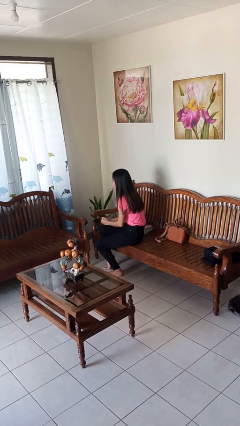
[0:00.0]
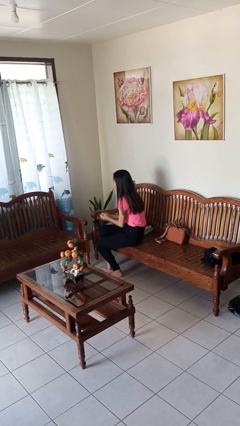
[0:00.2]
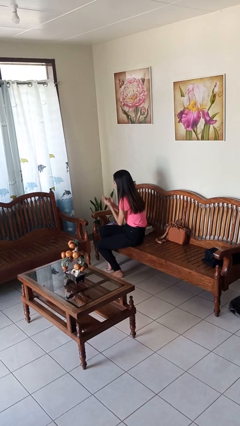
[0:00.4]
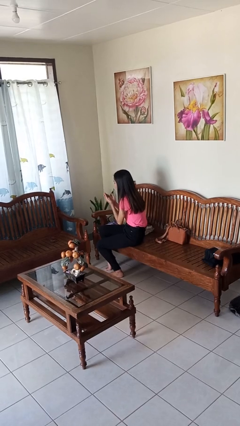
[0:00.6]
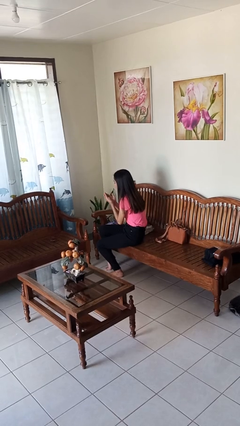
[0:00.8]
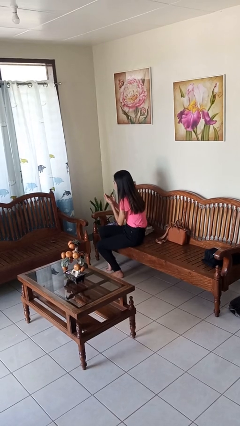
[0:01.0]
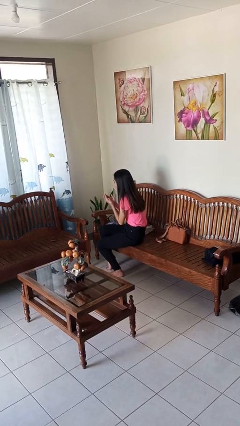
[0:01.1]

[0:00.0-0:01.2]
person blows into hands

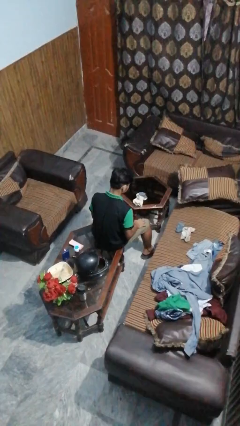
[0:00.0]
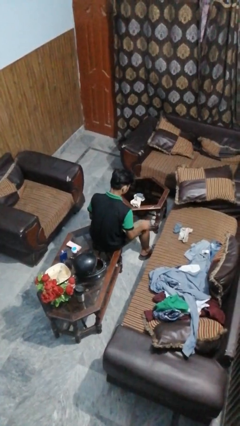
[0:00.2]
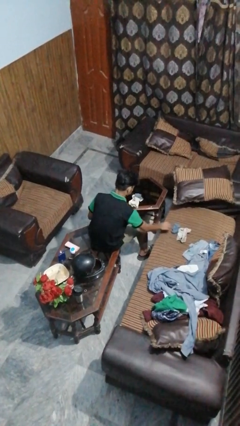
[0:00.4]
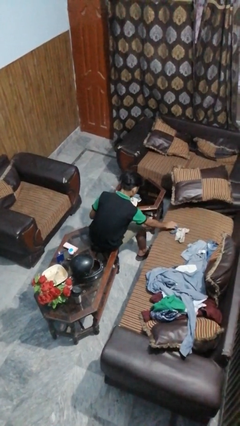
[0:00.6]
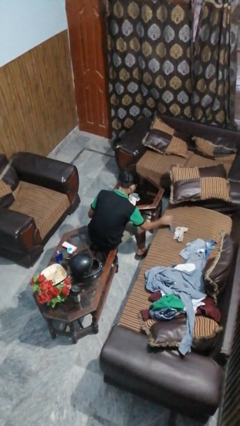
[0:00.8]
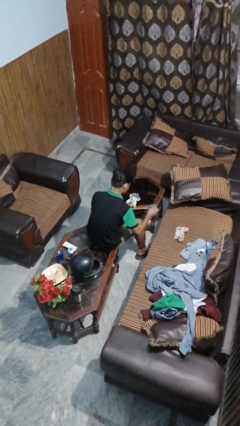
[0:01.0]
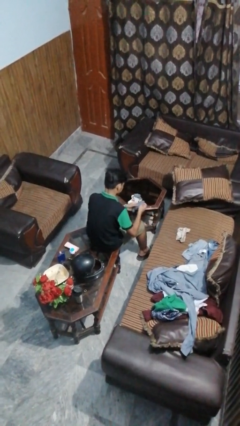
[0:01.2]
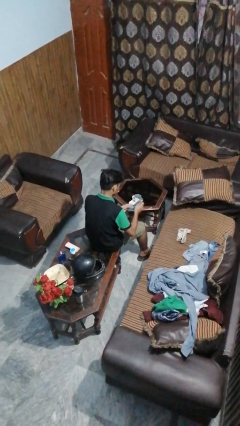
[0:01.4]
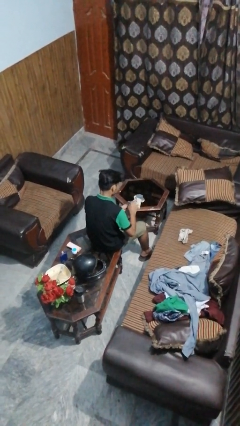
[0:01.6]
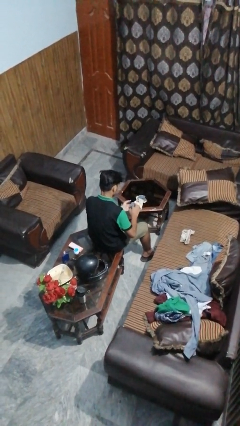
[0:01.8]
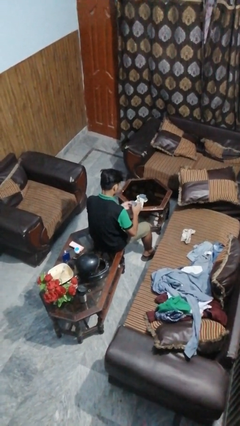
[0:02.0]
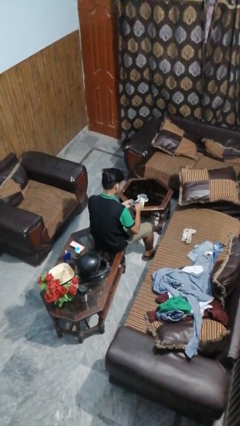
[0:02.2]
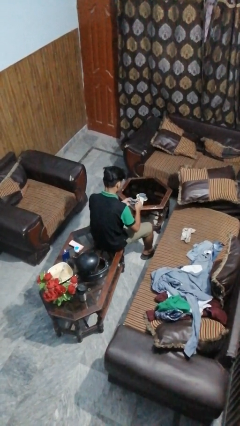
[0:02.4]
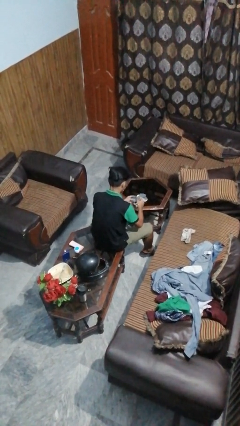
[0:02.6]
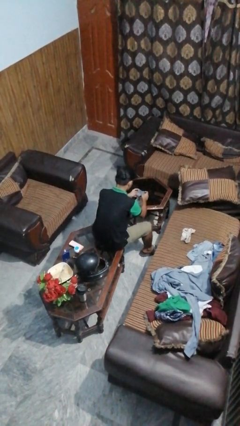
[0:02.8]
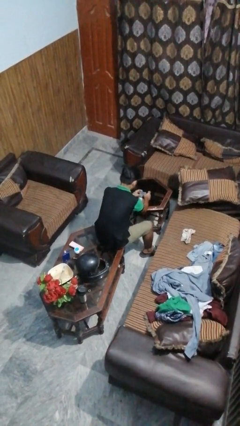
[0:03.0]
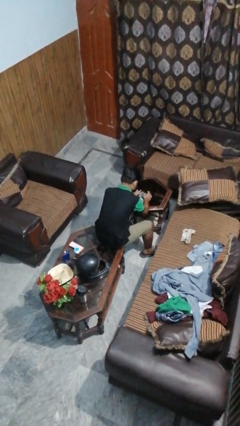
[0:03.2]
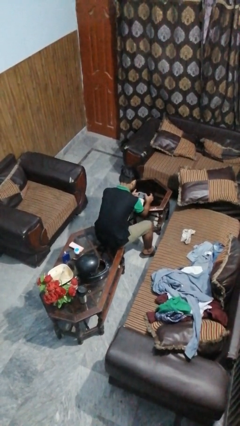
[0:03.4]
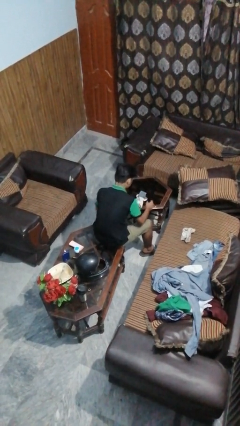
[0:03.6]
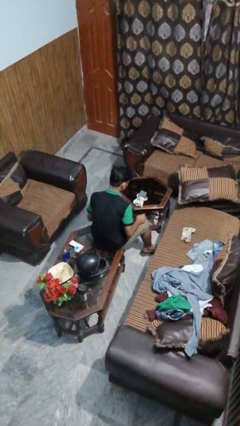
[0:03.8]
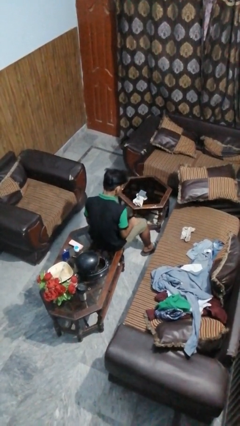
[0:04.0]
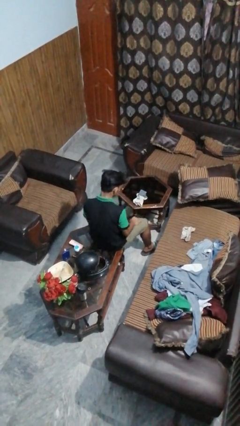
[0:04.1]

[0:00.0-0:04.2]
person folds socks

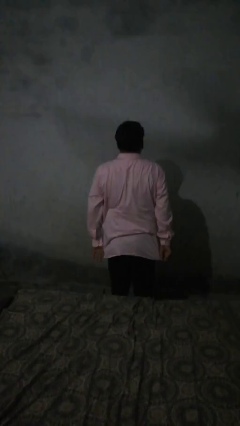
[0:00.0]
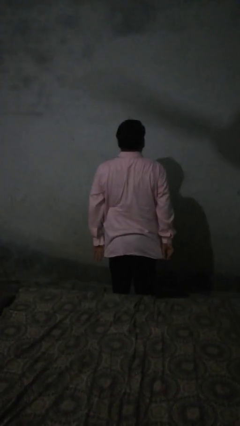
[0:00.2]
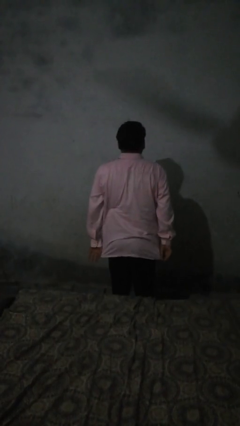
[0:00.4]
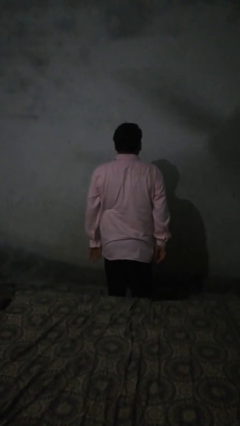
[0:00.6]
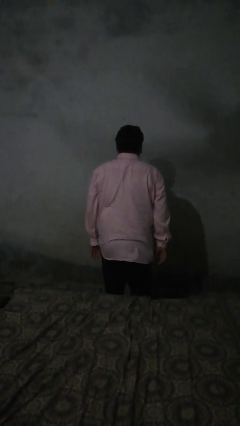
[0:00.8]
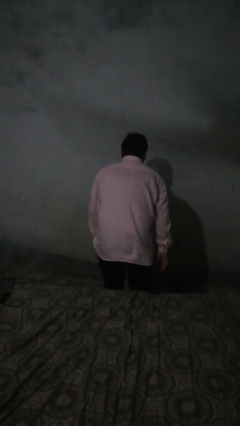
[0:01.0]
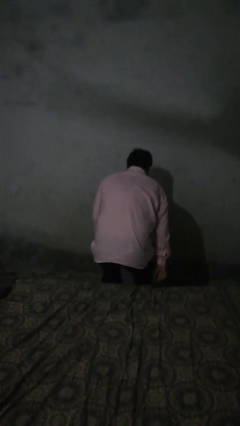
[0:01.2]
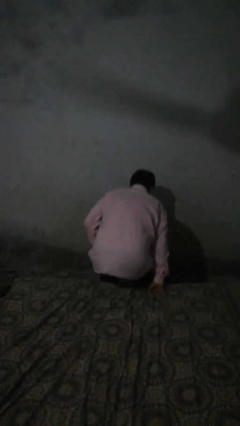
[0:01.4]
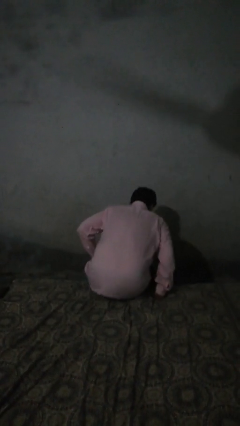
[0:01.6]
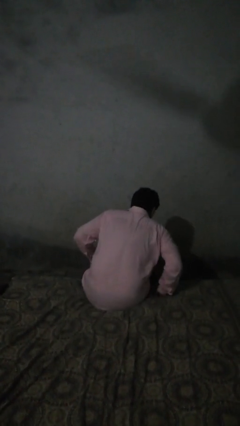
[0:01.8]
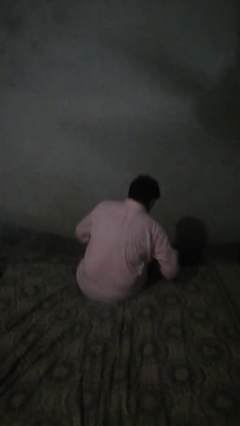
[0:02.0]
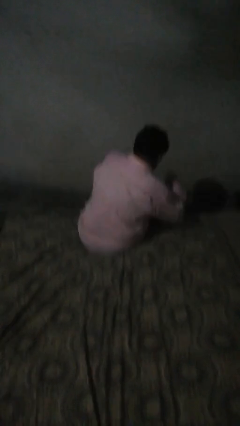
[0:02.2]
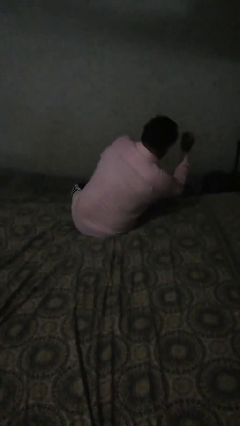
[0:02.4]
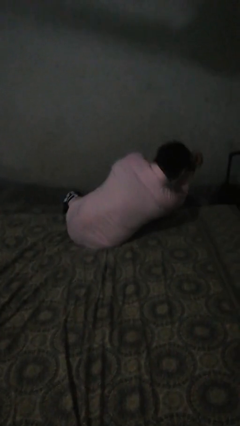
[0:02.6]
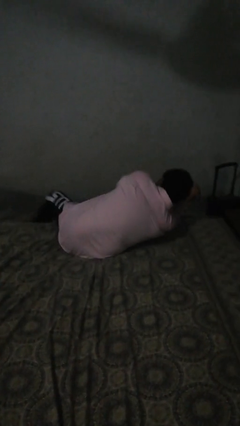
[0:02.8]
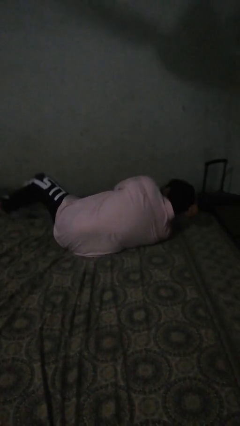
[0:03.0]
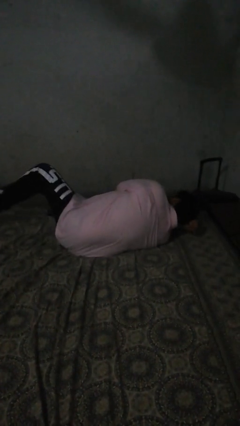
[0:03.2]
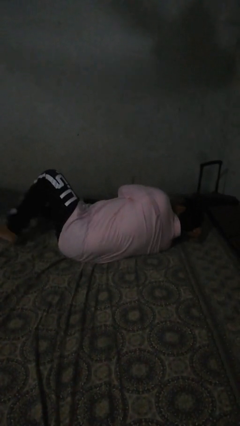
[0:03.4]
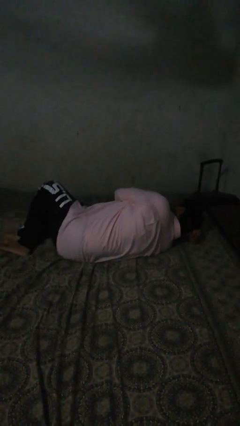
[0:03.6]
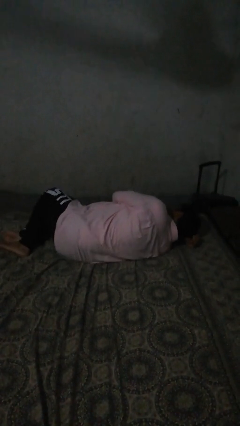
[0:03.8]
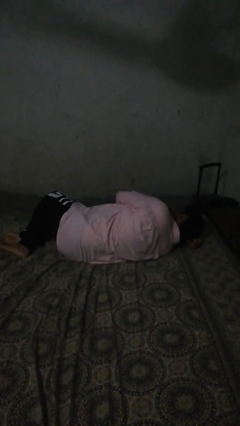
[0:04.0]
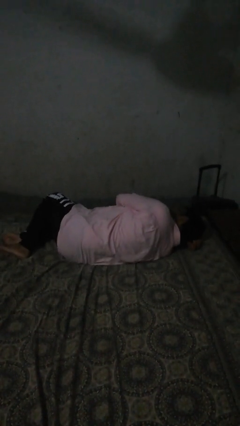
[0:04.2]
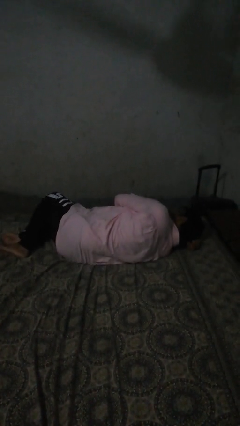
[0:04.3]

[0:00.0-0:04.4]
person lies down on bed

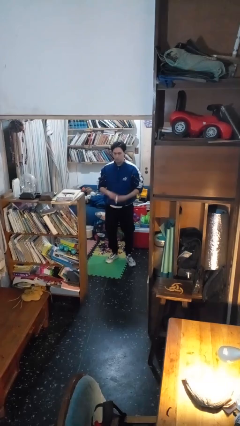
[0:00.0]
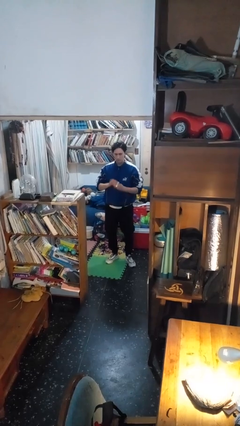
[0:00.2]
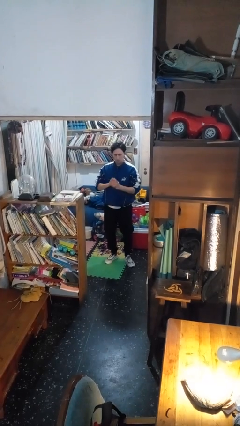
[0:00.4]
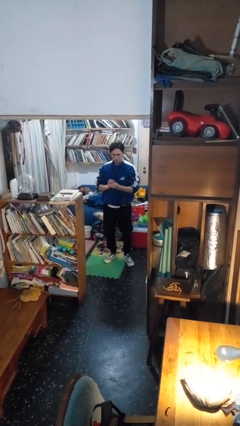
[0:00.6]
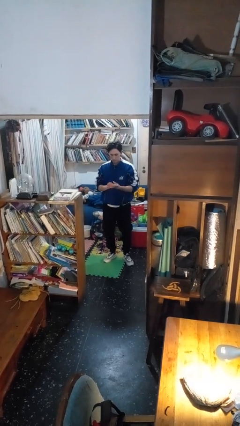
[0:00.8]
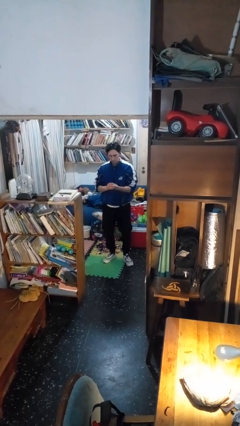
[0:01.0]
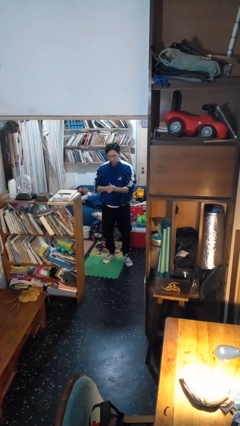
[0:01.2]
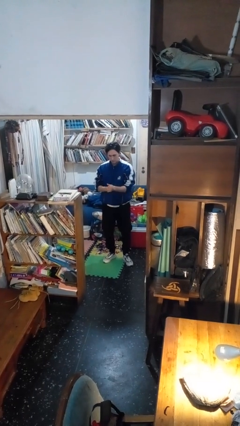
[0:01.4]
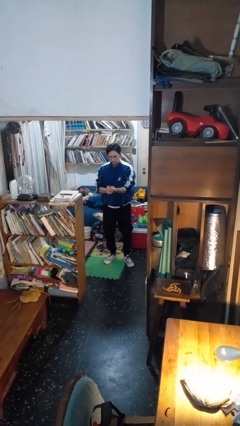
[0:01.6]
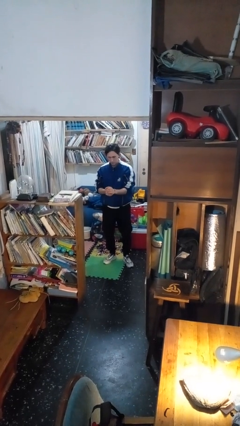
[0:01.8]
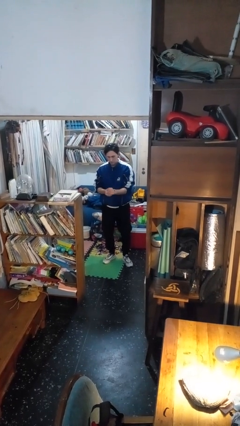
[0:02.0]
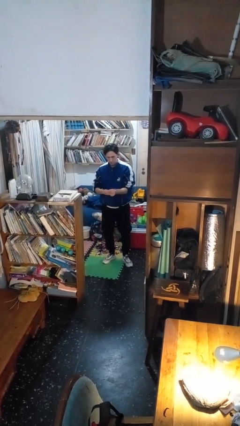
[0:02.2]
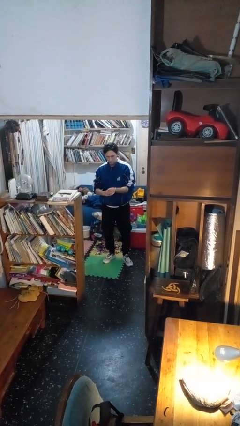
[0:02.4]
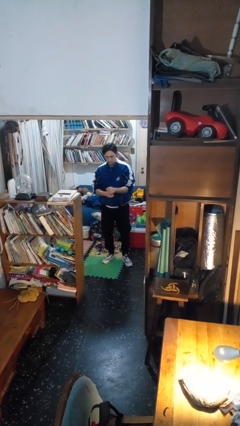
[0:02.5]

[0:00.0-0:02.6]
person puts on wristwatch

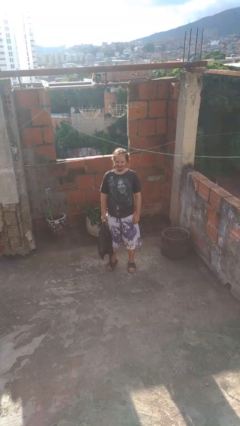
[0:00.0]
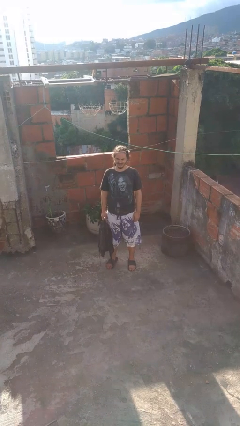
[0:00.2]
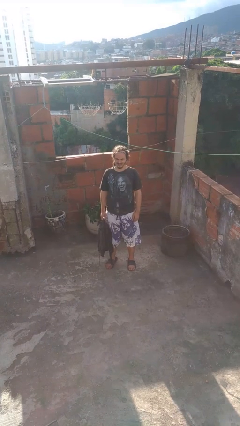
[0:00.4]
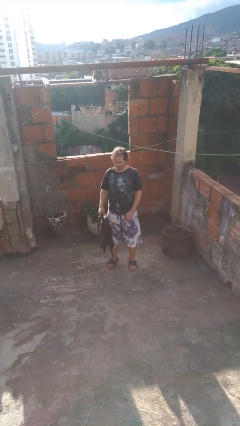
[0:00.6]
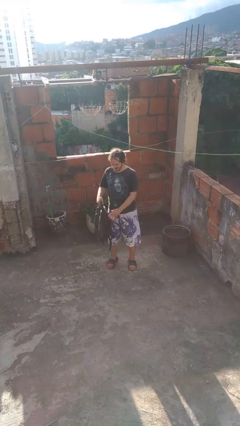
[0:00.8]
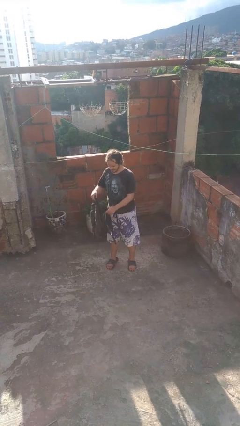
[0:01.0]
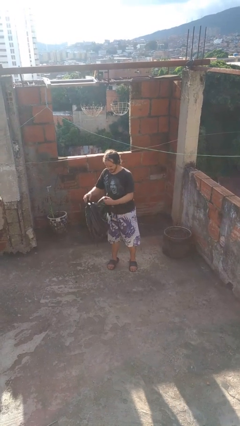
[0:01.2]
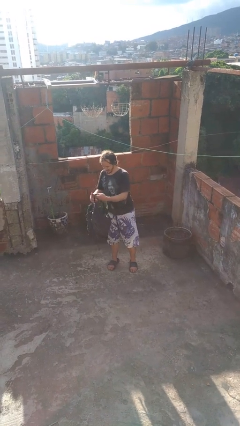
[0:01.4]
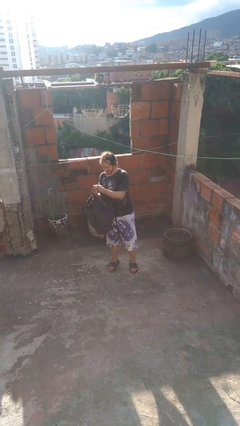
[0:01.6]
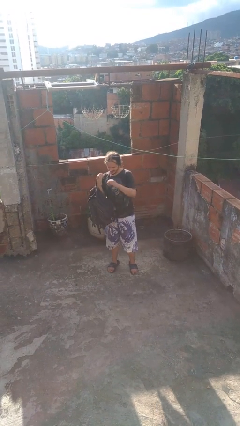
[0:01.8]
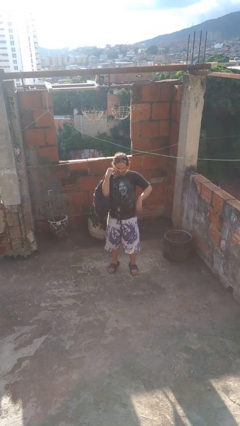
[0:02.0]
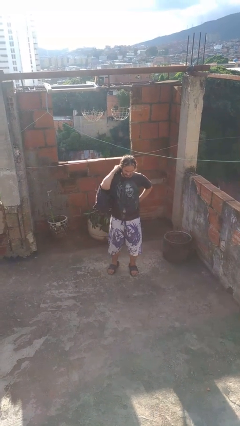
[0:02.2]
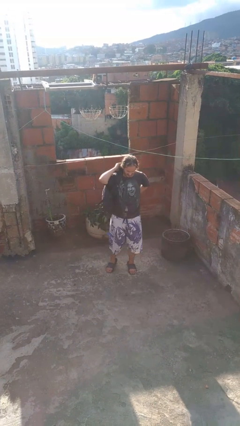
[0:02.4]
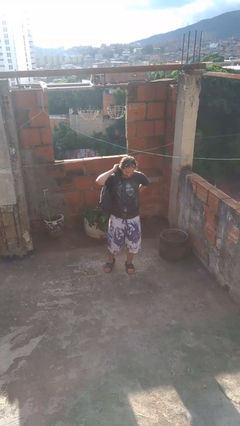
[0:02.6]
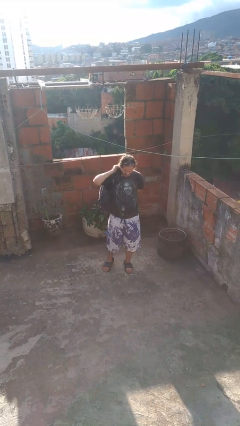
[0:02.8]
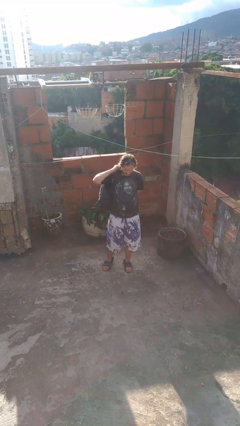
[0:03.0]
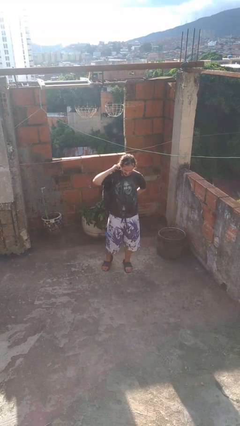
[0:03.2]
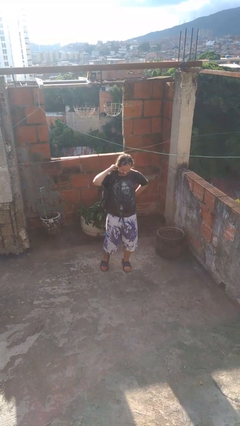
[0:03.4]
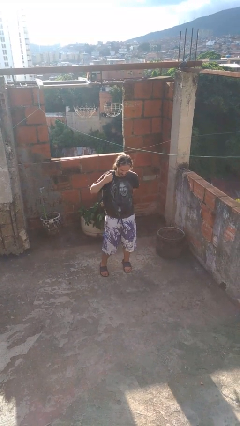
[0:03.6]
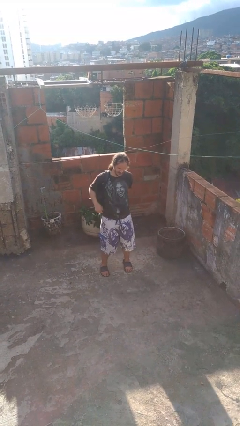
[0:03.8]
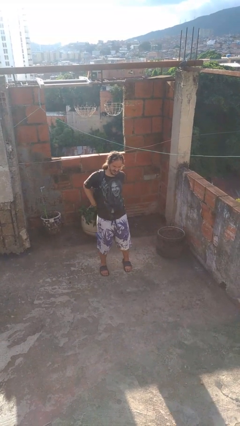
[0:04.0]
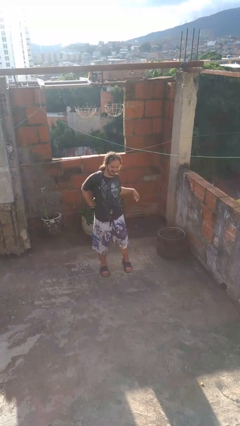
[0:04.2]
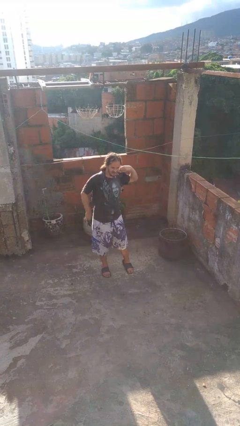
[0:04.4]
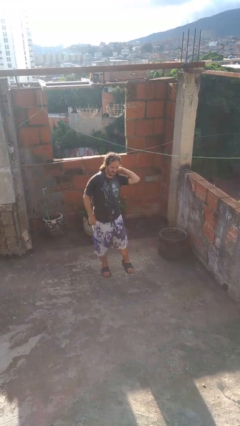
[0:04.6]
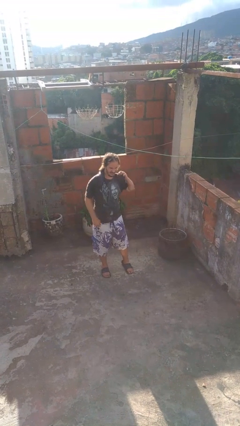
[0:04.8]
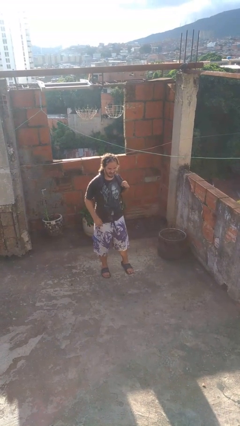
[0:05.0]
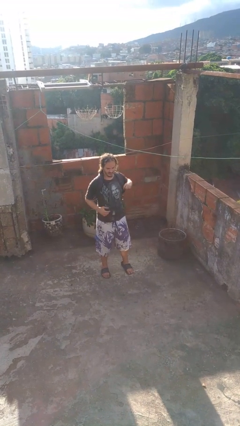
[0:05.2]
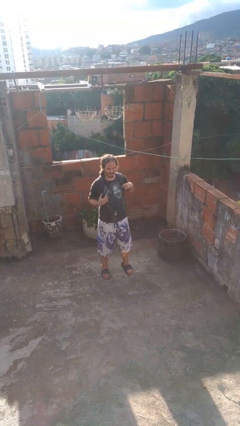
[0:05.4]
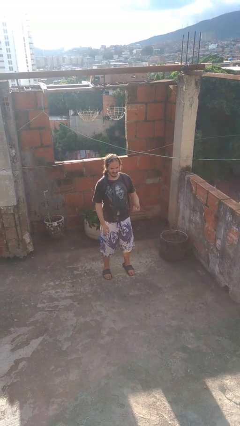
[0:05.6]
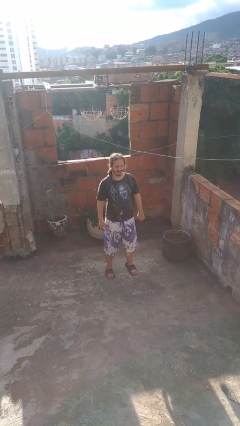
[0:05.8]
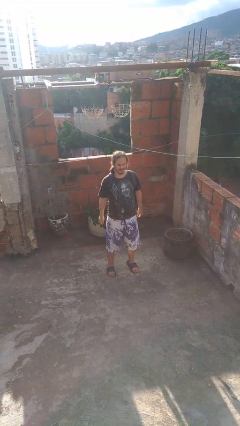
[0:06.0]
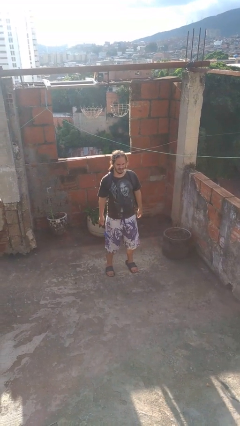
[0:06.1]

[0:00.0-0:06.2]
person puts on backpack
